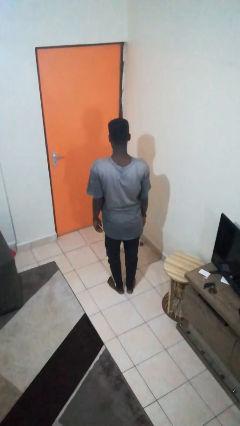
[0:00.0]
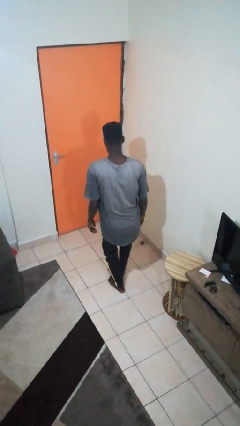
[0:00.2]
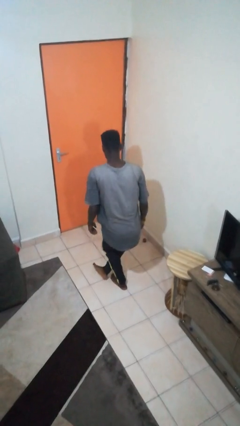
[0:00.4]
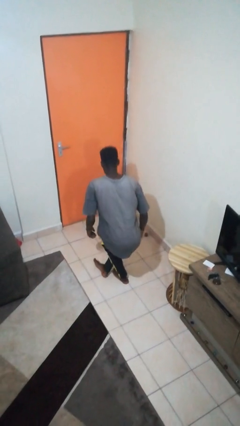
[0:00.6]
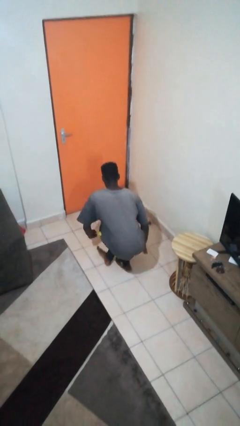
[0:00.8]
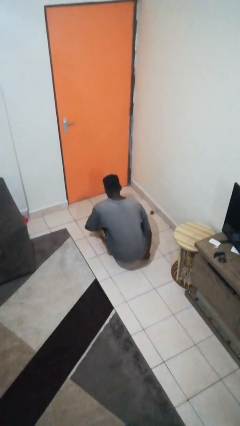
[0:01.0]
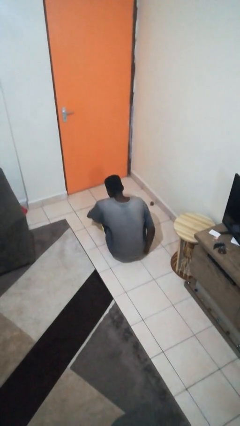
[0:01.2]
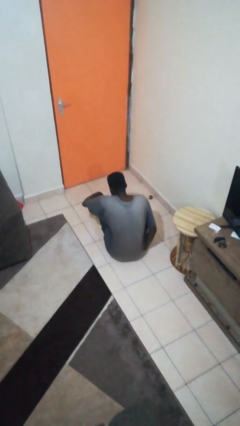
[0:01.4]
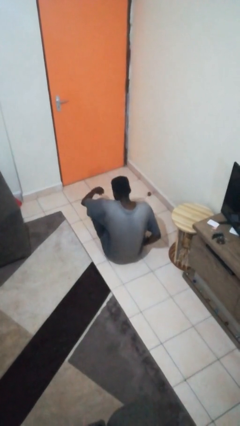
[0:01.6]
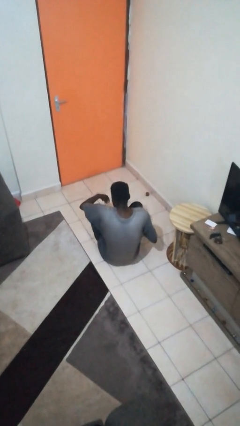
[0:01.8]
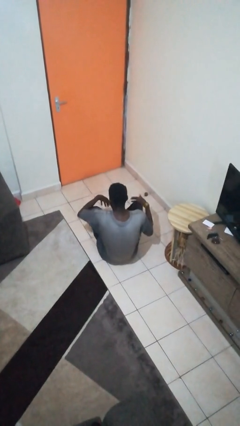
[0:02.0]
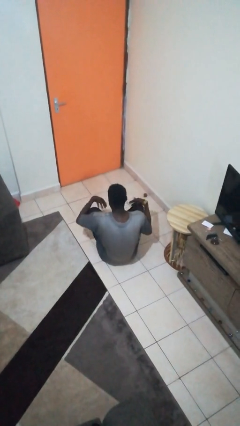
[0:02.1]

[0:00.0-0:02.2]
person sits crisscross

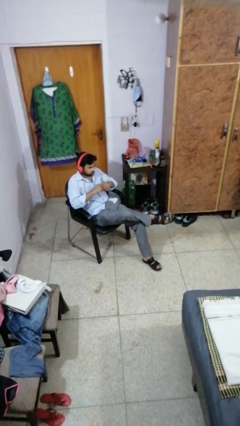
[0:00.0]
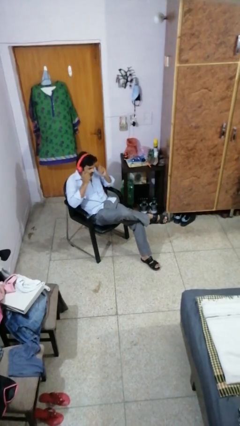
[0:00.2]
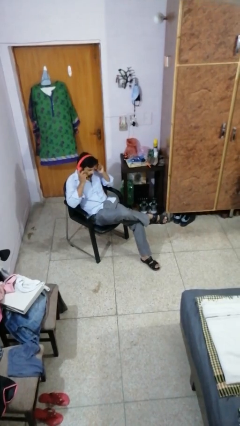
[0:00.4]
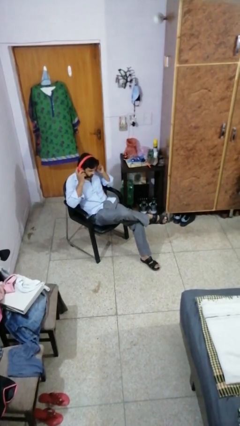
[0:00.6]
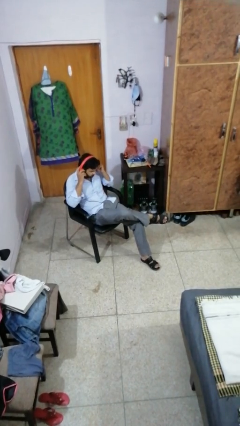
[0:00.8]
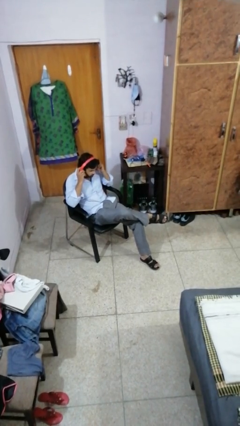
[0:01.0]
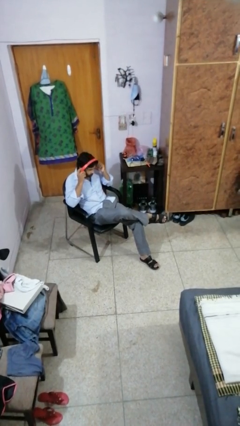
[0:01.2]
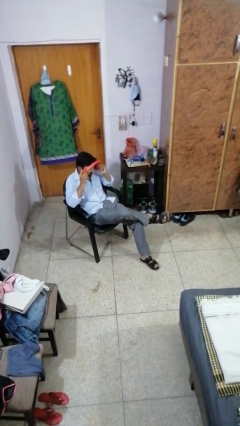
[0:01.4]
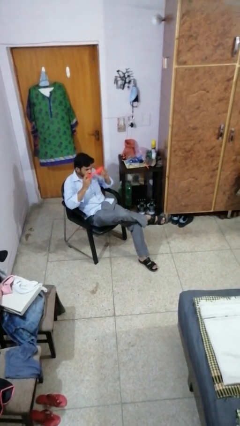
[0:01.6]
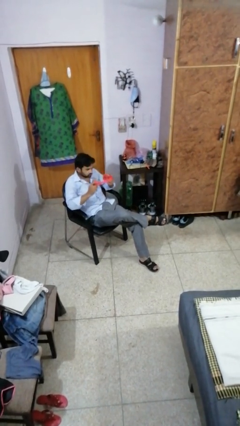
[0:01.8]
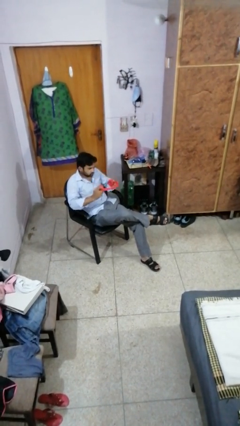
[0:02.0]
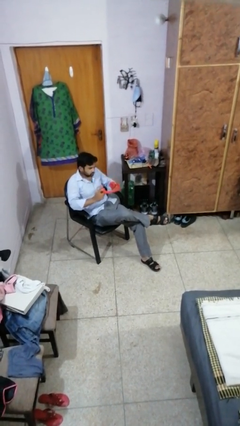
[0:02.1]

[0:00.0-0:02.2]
person takes off headphones

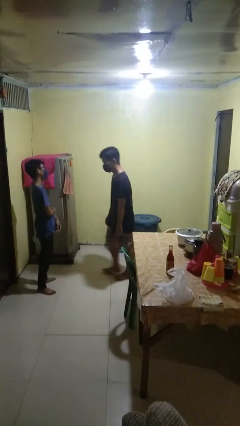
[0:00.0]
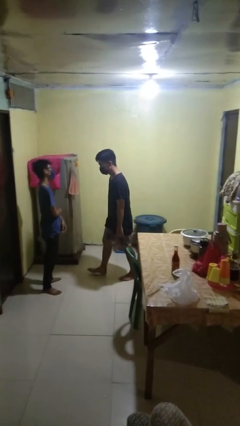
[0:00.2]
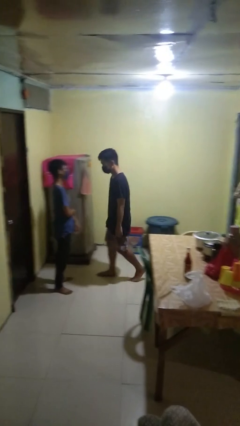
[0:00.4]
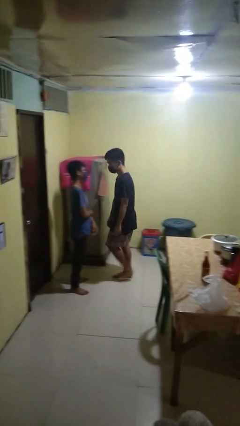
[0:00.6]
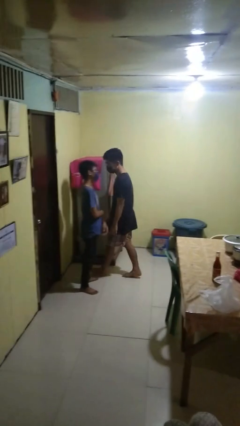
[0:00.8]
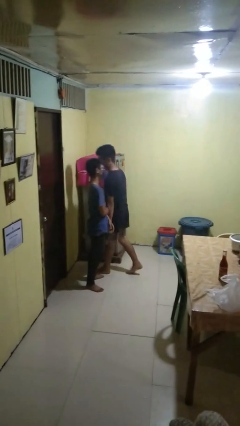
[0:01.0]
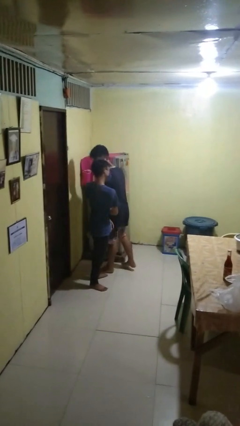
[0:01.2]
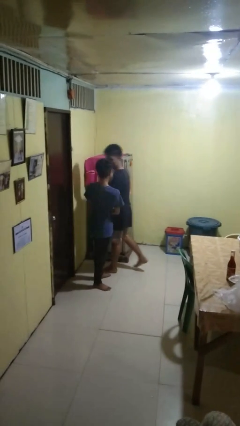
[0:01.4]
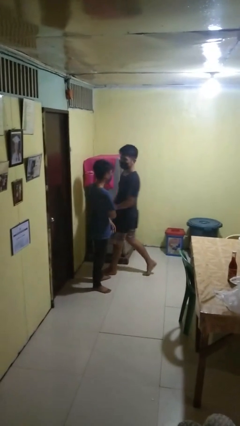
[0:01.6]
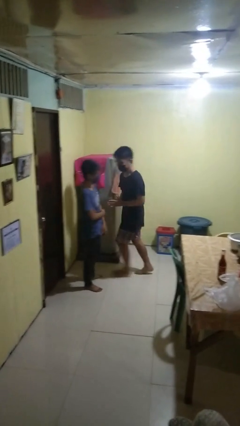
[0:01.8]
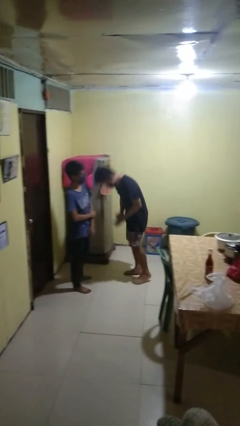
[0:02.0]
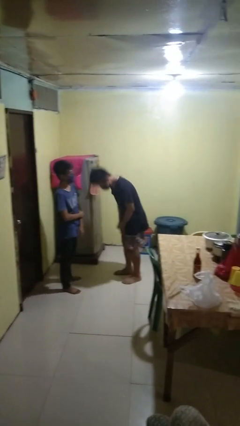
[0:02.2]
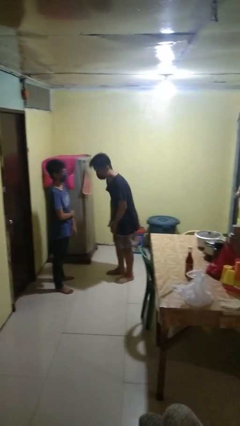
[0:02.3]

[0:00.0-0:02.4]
person bumps into person

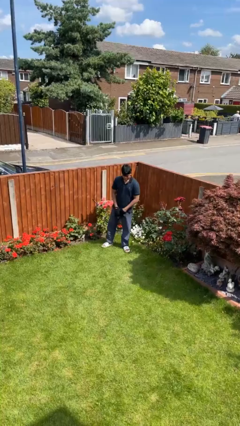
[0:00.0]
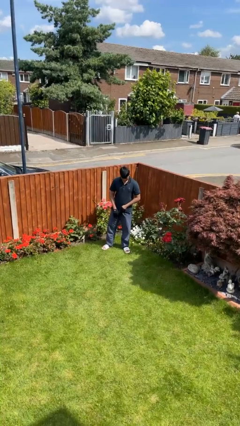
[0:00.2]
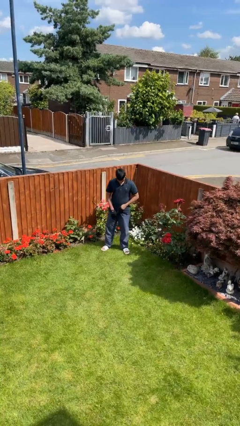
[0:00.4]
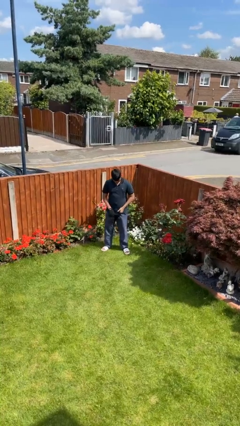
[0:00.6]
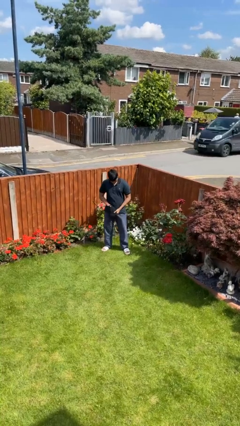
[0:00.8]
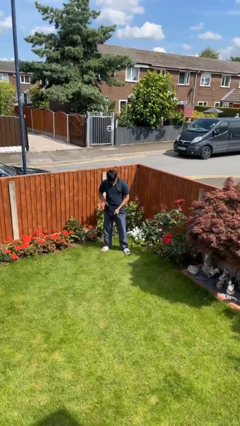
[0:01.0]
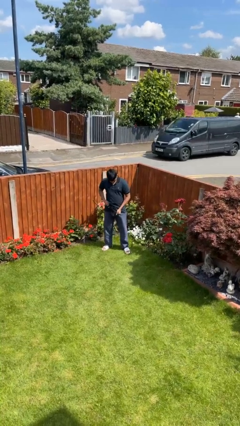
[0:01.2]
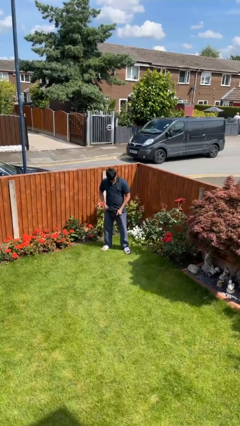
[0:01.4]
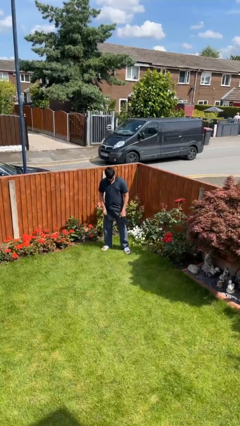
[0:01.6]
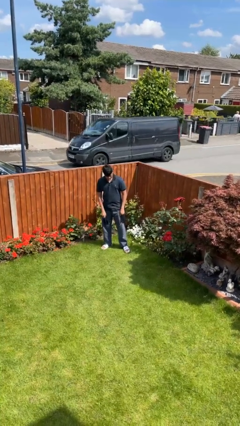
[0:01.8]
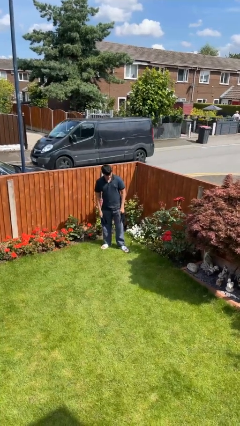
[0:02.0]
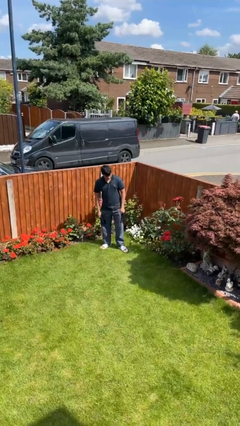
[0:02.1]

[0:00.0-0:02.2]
person takes off gloves

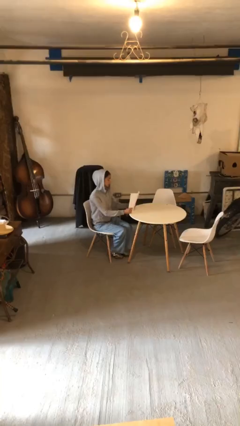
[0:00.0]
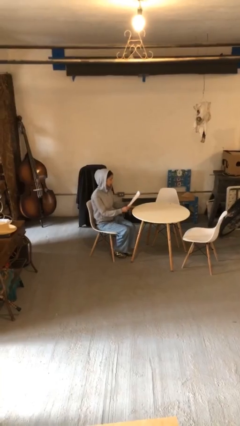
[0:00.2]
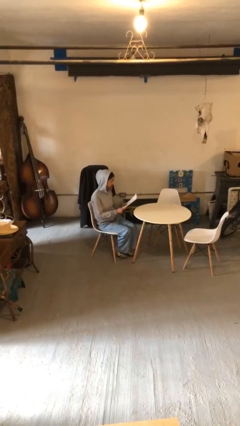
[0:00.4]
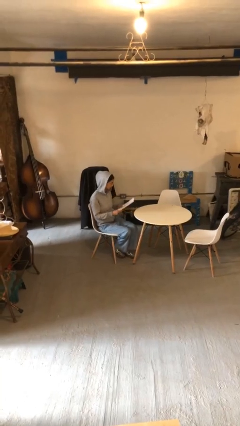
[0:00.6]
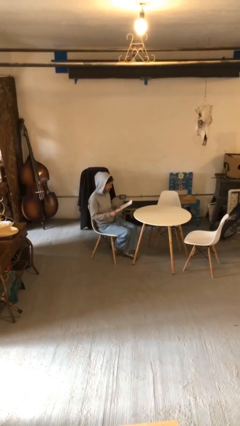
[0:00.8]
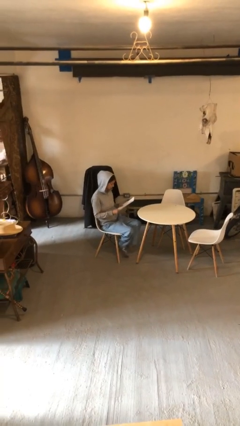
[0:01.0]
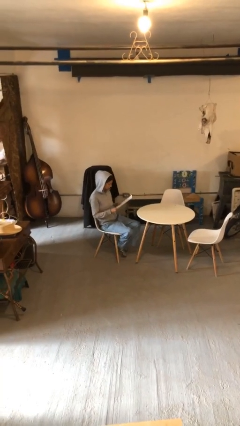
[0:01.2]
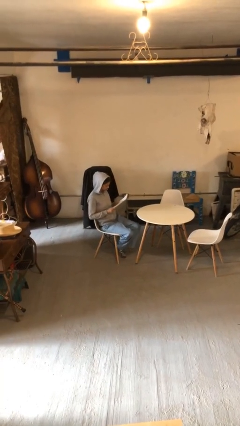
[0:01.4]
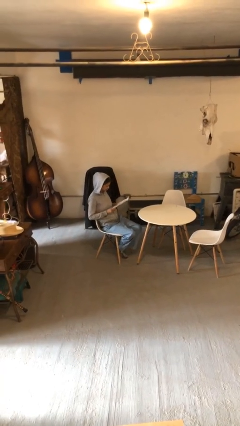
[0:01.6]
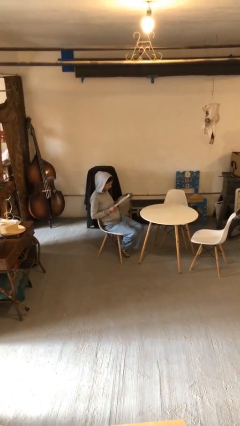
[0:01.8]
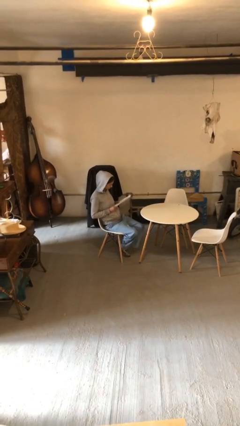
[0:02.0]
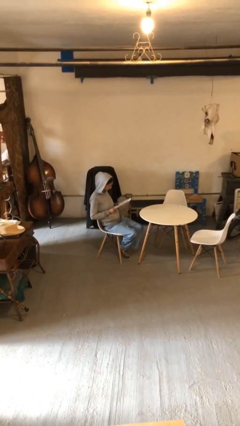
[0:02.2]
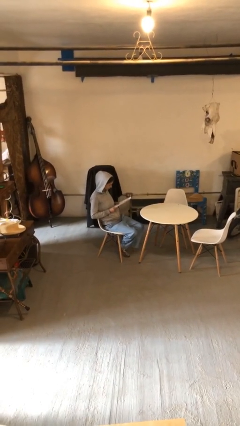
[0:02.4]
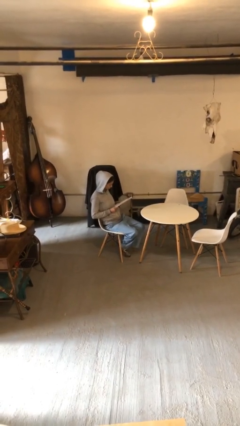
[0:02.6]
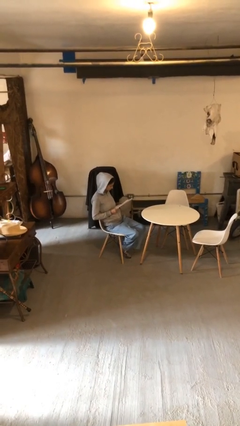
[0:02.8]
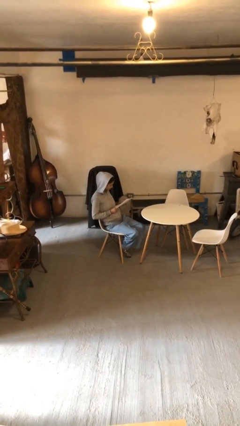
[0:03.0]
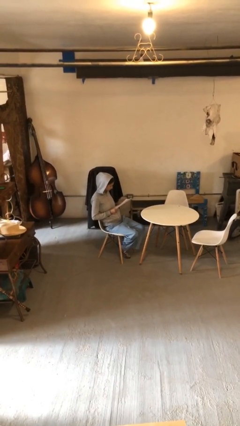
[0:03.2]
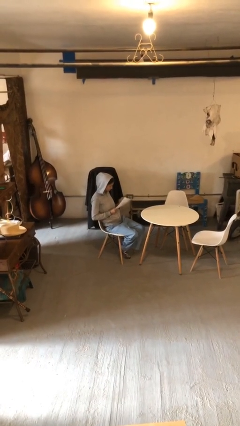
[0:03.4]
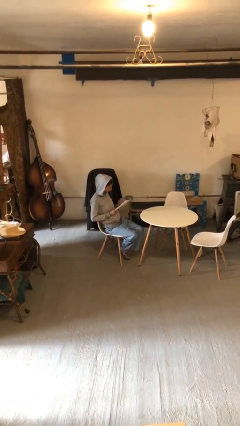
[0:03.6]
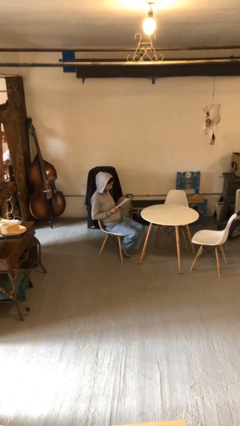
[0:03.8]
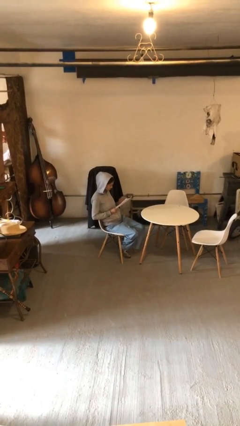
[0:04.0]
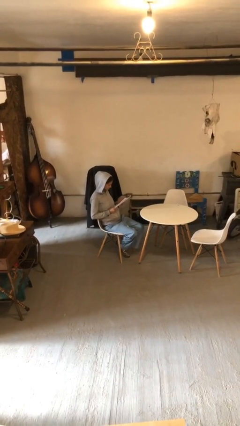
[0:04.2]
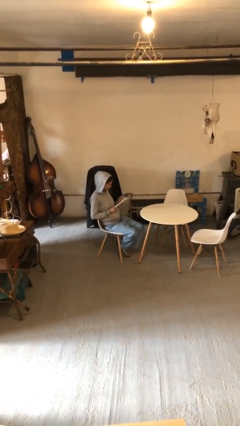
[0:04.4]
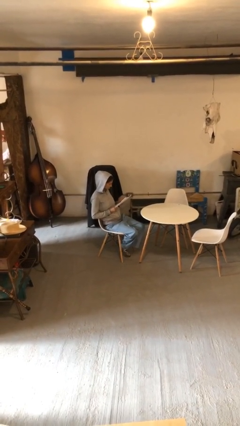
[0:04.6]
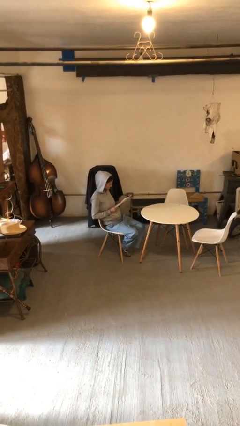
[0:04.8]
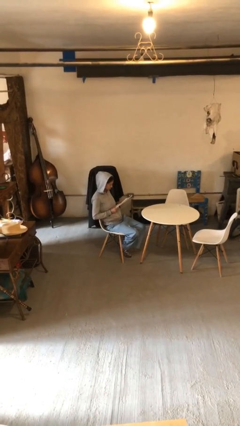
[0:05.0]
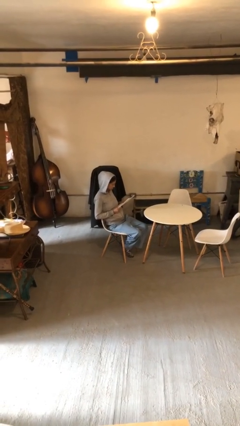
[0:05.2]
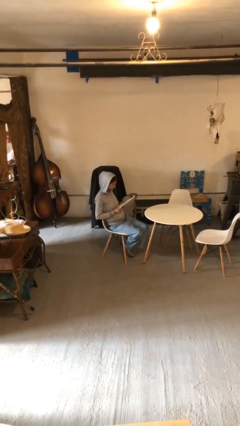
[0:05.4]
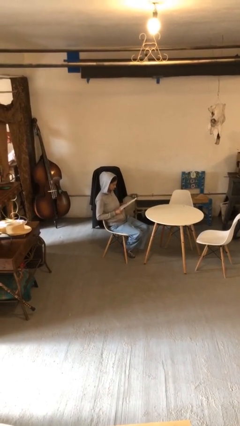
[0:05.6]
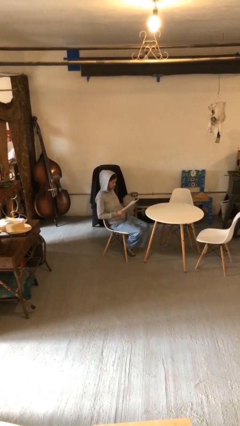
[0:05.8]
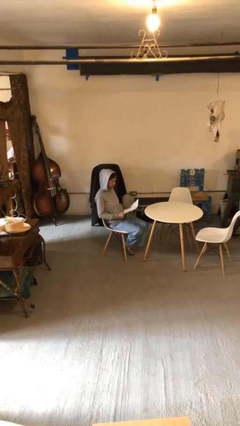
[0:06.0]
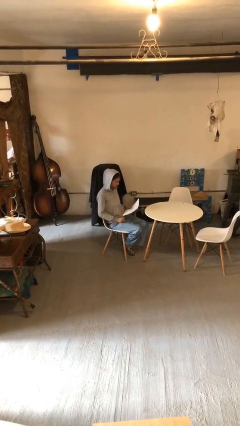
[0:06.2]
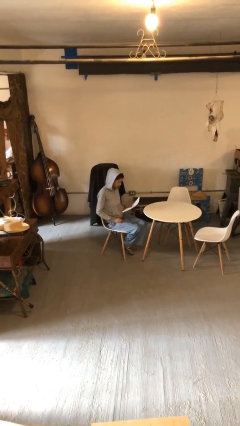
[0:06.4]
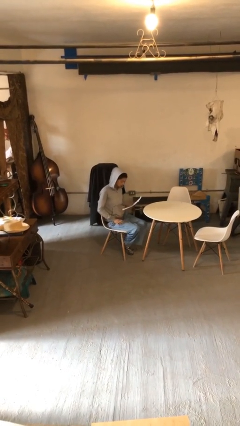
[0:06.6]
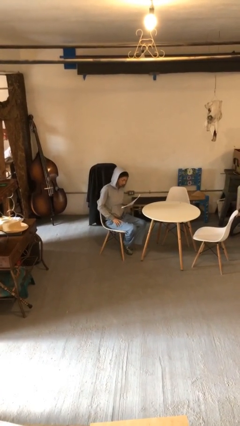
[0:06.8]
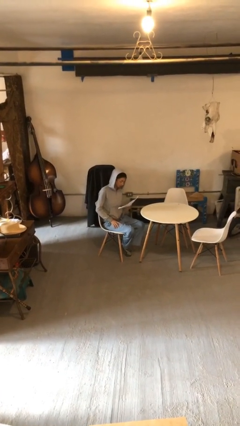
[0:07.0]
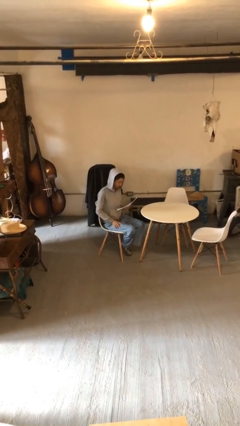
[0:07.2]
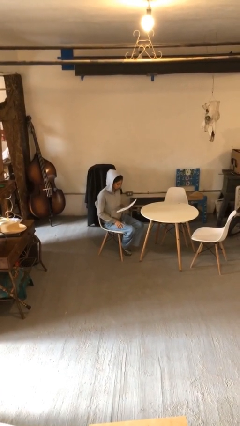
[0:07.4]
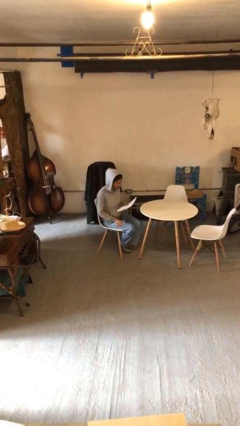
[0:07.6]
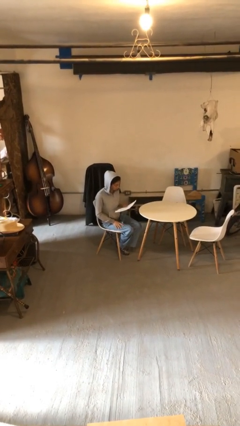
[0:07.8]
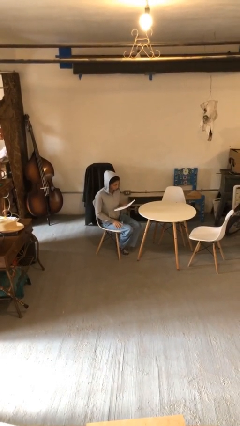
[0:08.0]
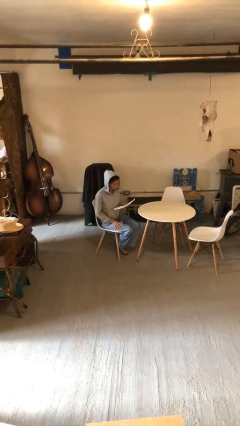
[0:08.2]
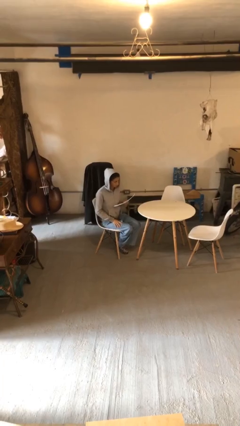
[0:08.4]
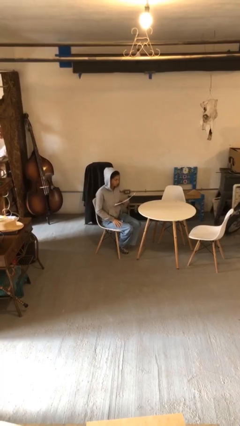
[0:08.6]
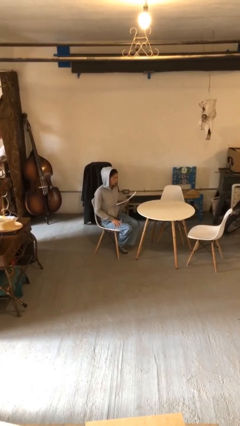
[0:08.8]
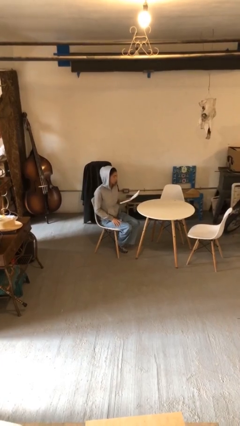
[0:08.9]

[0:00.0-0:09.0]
person reads document
